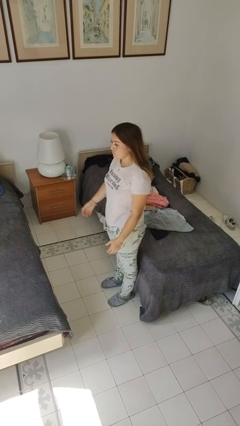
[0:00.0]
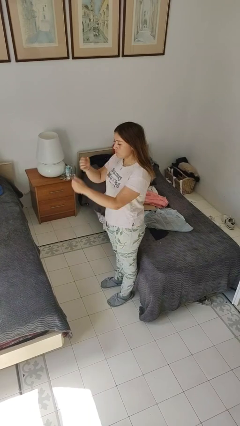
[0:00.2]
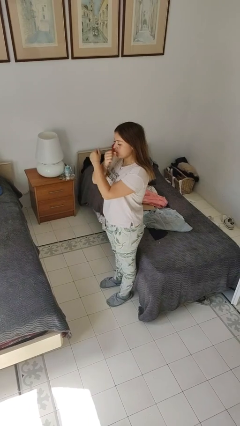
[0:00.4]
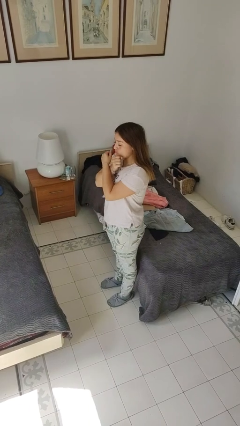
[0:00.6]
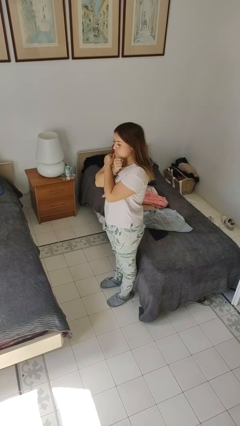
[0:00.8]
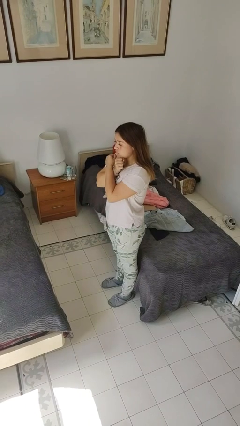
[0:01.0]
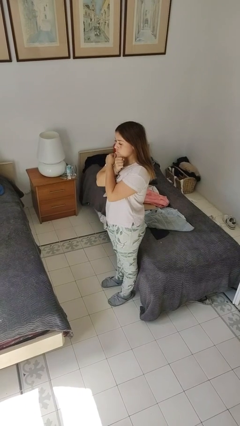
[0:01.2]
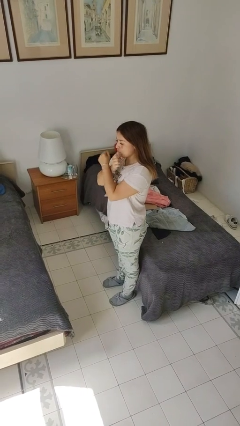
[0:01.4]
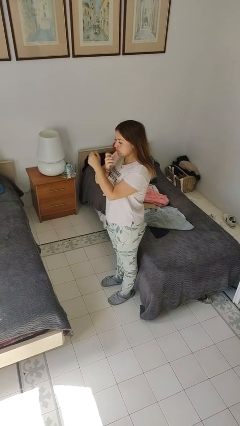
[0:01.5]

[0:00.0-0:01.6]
person gestures arms x

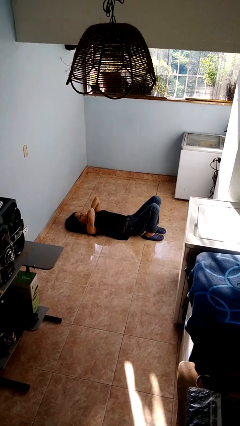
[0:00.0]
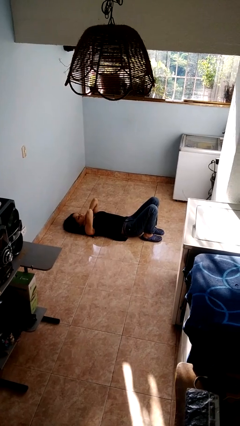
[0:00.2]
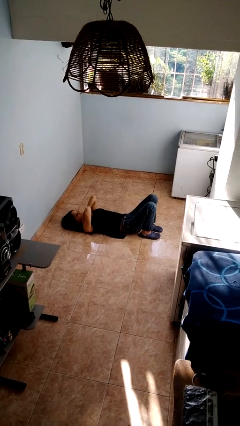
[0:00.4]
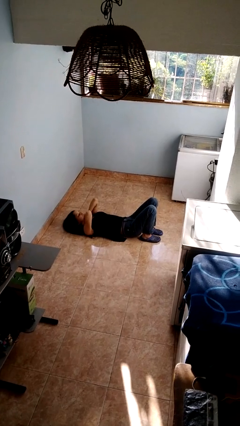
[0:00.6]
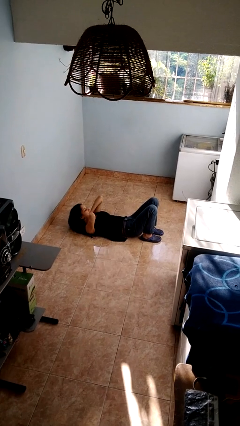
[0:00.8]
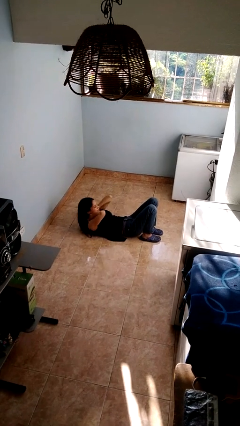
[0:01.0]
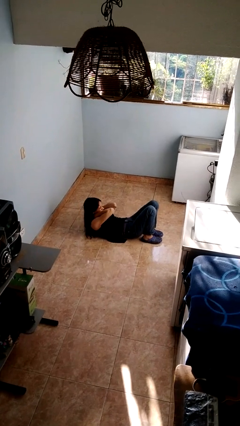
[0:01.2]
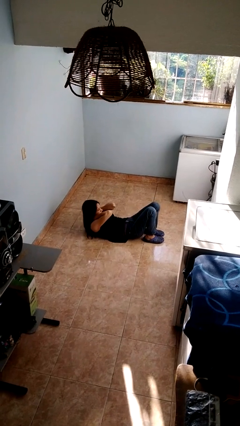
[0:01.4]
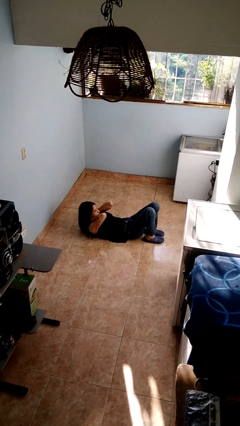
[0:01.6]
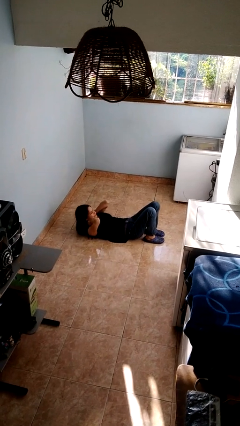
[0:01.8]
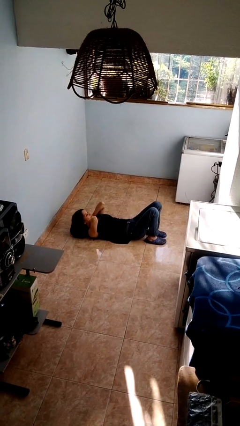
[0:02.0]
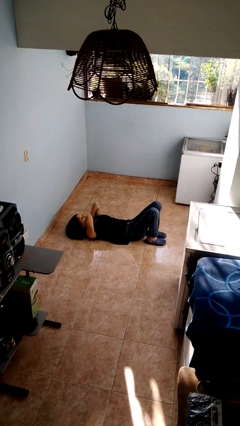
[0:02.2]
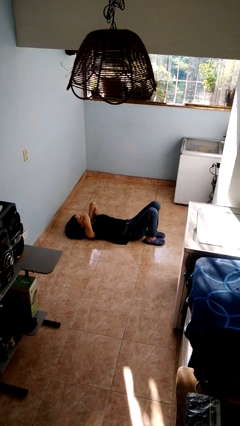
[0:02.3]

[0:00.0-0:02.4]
person exercises with situp

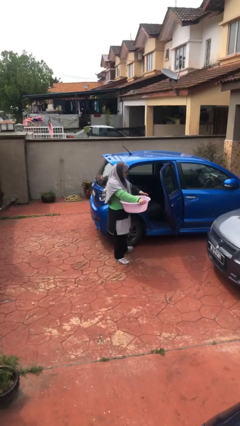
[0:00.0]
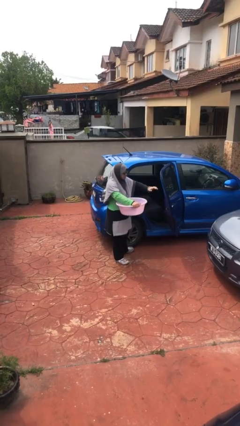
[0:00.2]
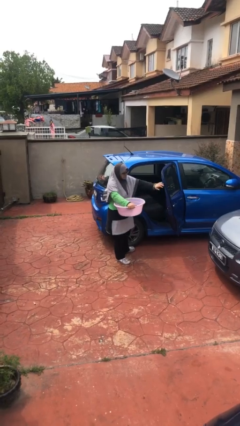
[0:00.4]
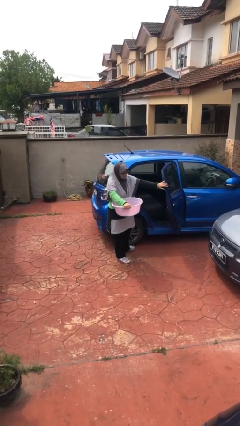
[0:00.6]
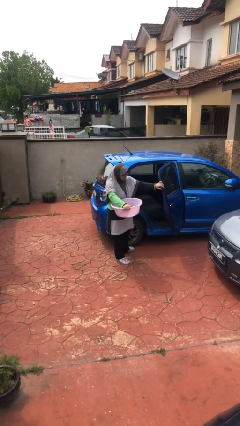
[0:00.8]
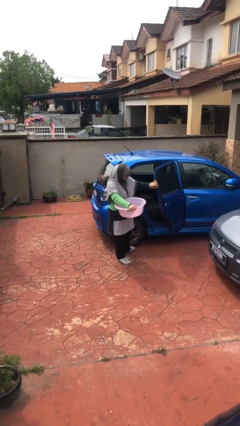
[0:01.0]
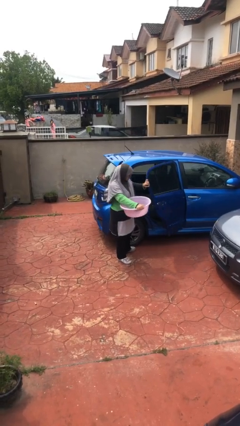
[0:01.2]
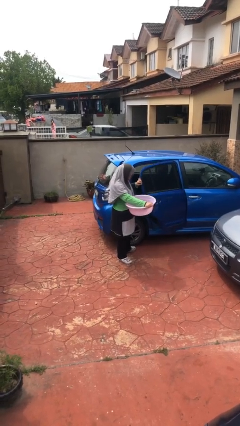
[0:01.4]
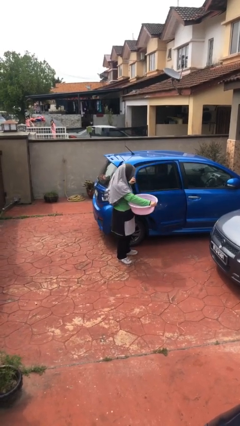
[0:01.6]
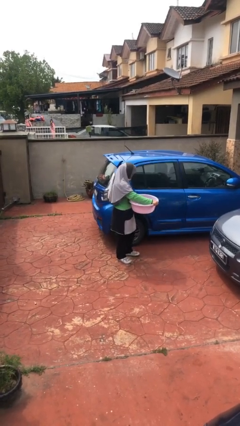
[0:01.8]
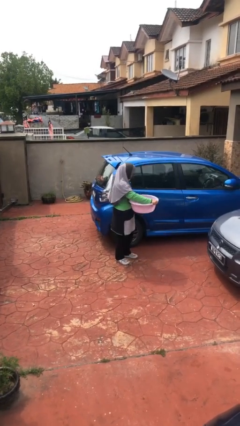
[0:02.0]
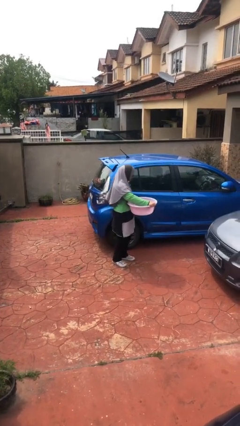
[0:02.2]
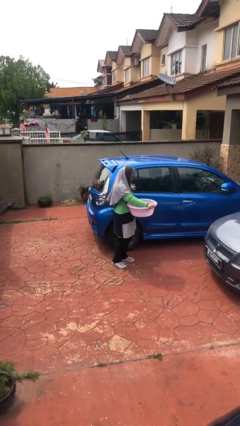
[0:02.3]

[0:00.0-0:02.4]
person closes car door

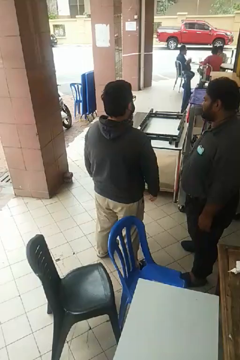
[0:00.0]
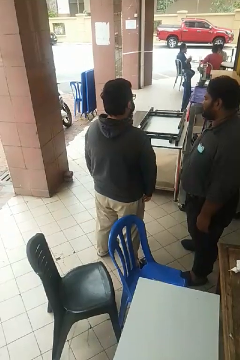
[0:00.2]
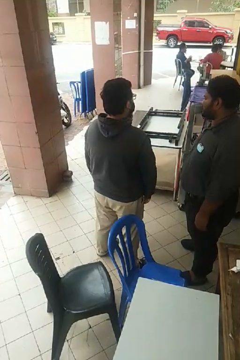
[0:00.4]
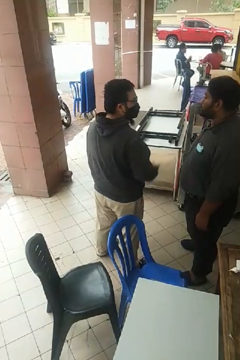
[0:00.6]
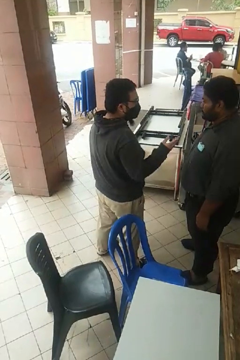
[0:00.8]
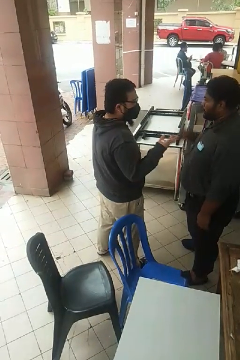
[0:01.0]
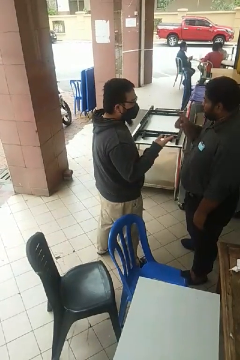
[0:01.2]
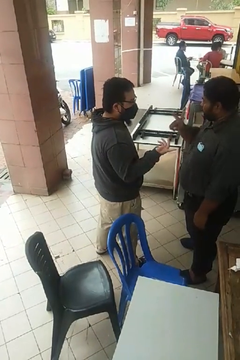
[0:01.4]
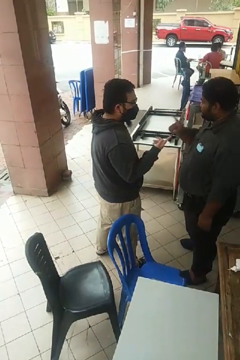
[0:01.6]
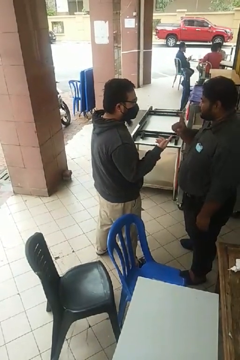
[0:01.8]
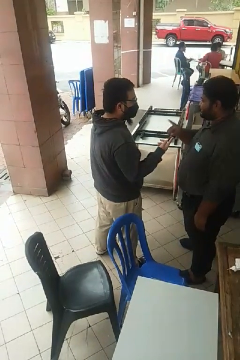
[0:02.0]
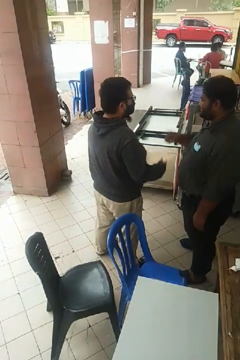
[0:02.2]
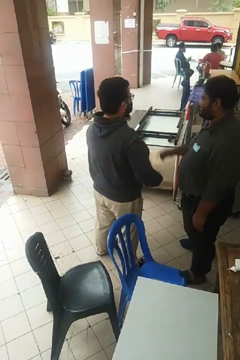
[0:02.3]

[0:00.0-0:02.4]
person talks to person

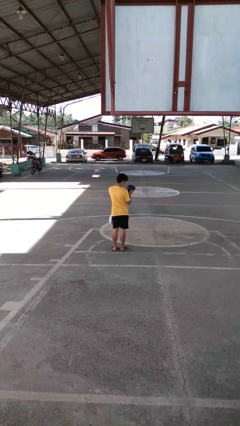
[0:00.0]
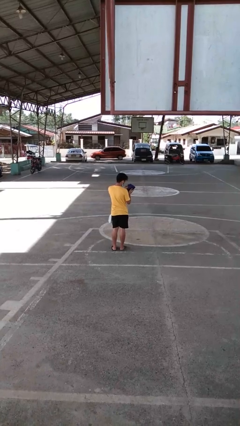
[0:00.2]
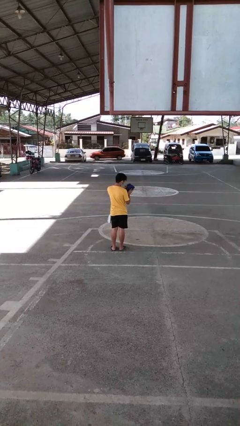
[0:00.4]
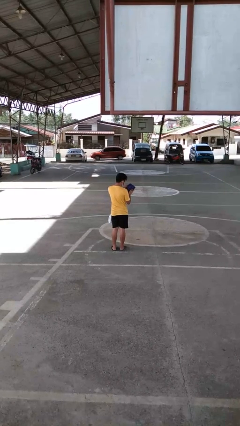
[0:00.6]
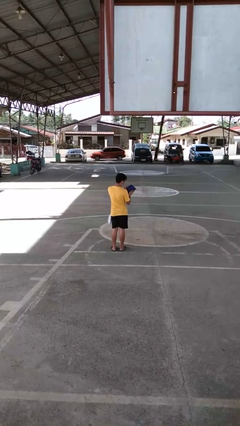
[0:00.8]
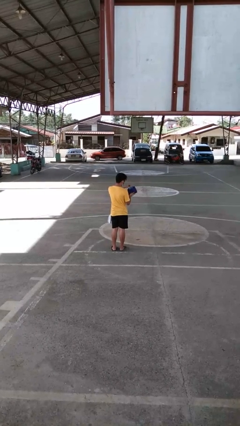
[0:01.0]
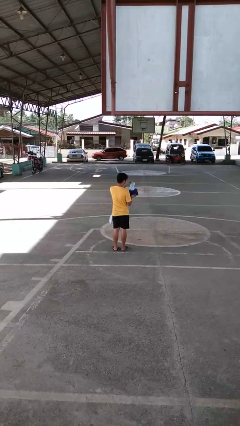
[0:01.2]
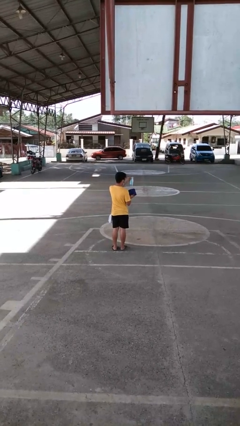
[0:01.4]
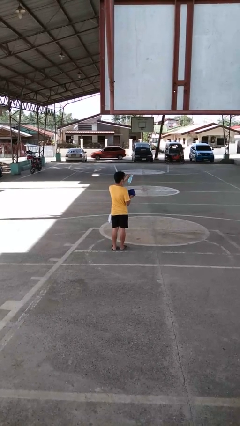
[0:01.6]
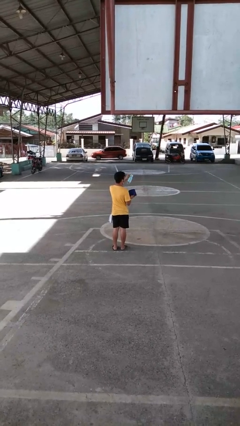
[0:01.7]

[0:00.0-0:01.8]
person takes off glasses

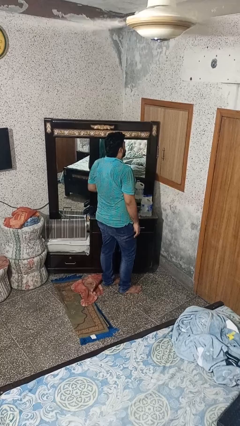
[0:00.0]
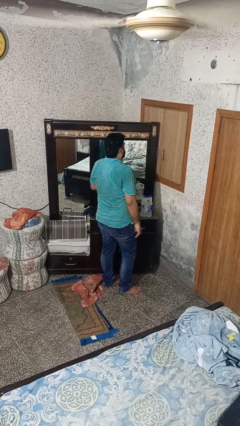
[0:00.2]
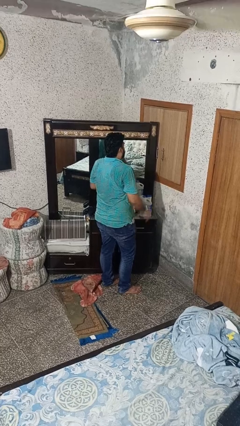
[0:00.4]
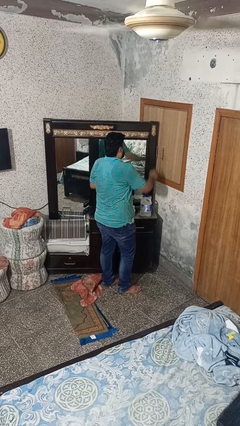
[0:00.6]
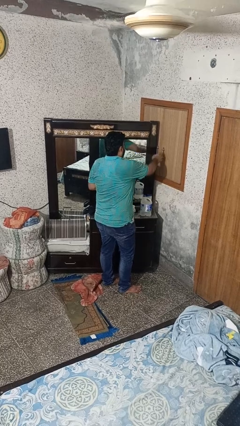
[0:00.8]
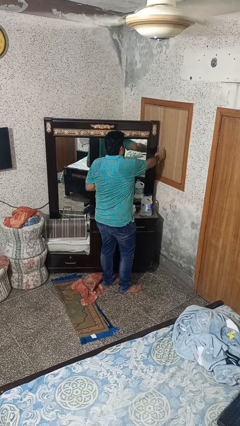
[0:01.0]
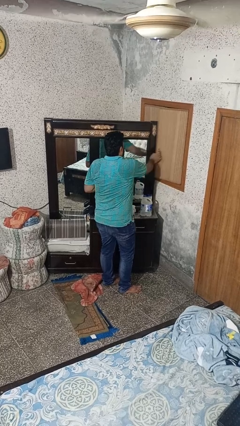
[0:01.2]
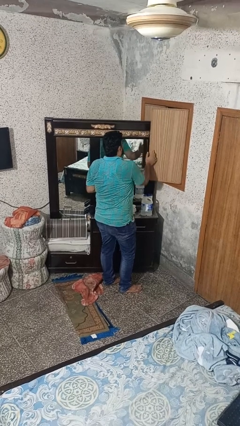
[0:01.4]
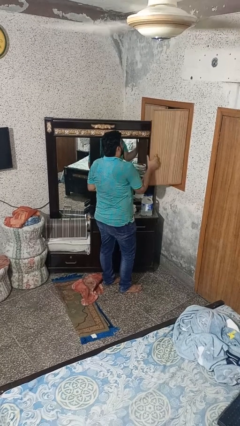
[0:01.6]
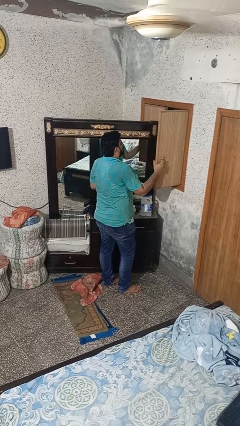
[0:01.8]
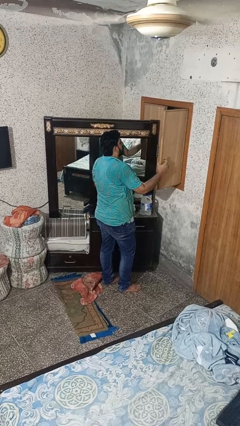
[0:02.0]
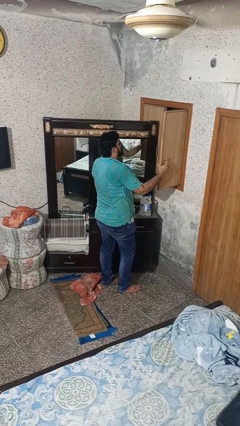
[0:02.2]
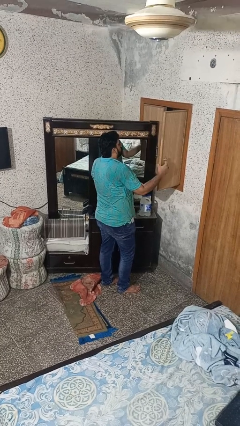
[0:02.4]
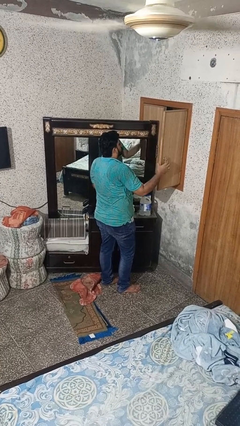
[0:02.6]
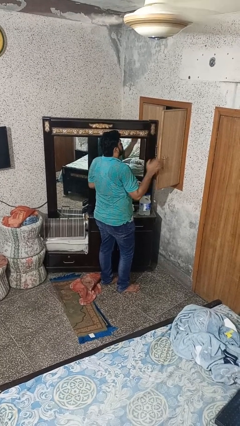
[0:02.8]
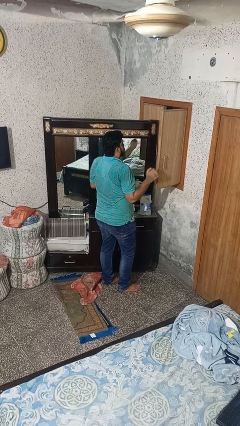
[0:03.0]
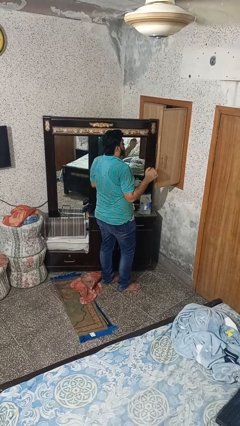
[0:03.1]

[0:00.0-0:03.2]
person opens home window

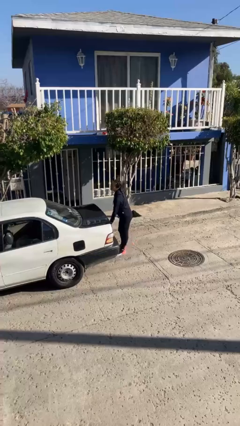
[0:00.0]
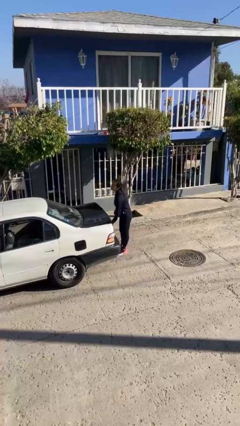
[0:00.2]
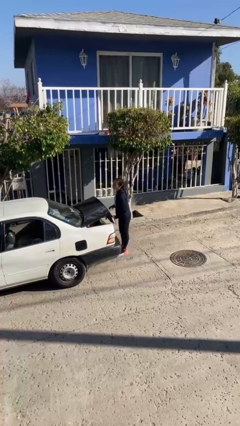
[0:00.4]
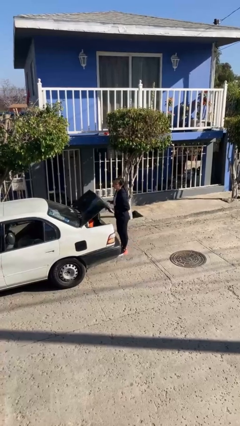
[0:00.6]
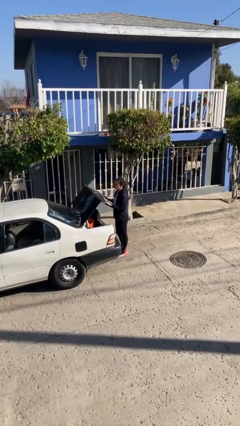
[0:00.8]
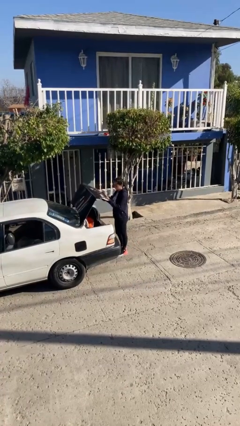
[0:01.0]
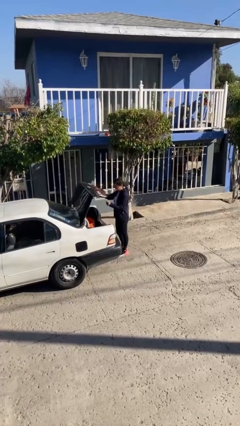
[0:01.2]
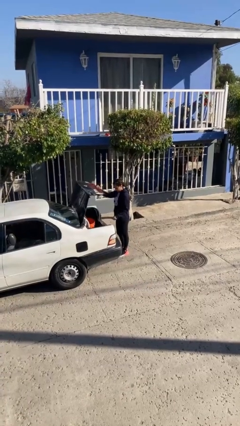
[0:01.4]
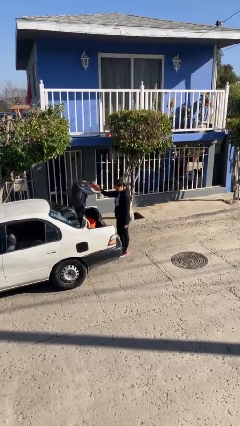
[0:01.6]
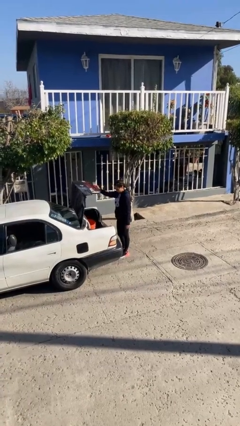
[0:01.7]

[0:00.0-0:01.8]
person opens car trunk

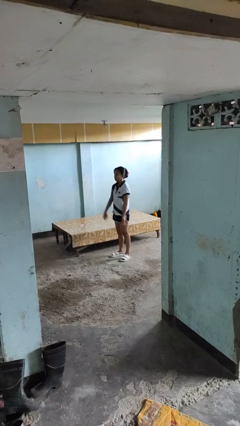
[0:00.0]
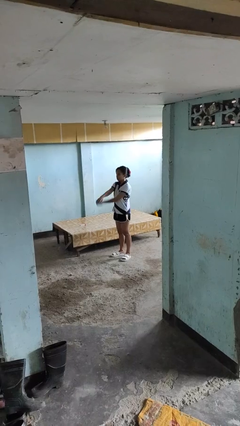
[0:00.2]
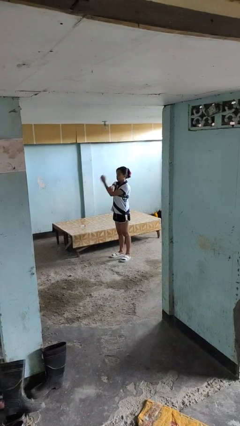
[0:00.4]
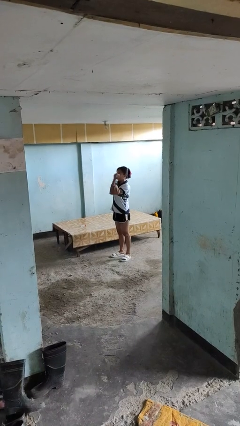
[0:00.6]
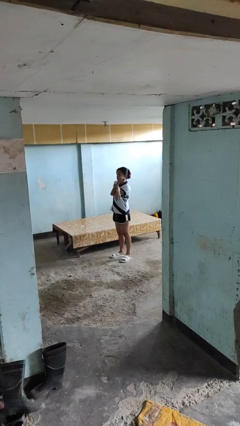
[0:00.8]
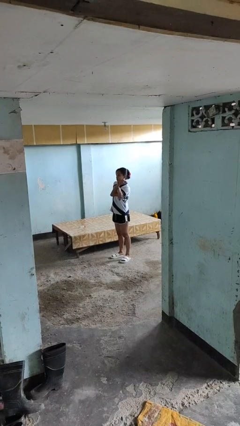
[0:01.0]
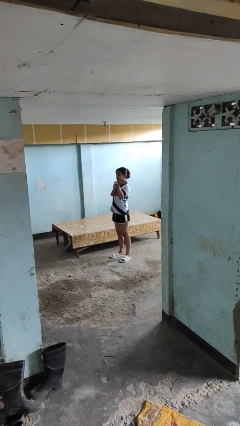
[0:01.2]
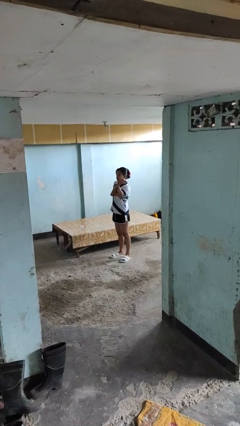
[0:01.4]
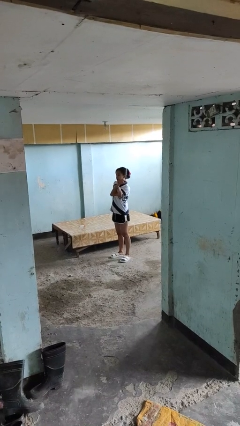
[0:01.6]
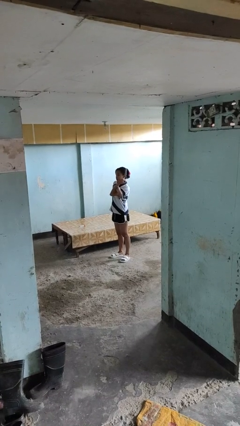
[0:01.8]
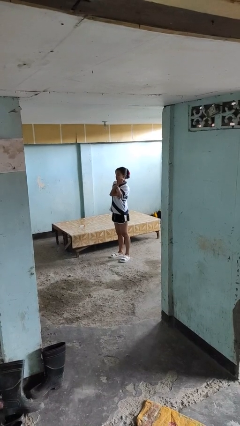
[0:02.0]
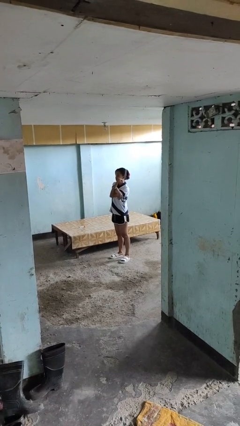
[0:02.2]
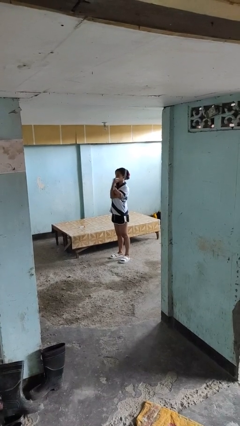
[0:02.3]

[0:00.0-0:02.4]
person crosses arms
